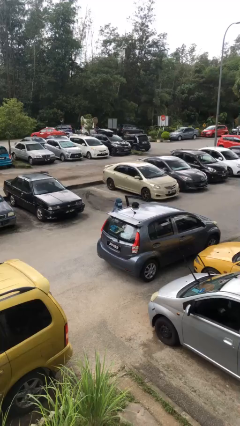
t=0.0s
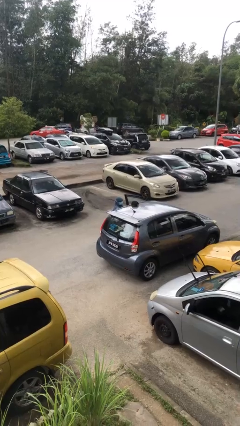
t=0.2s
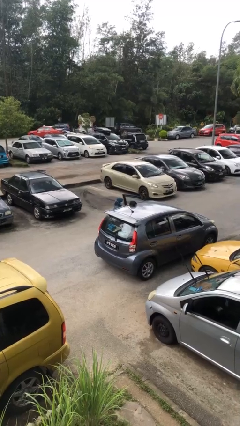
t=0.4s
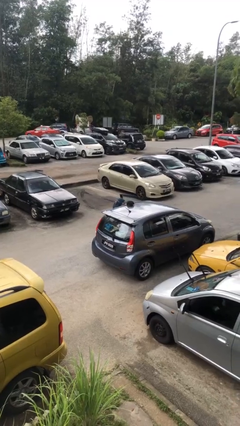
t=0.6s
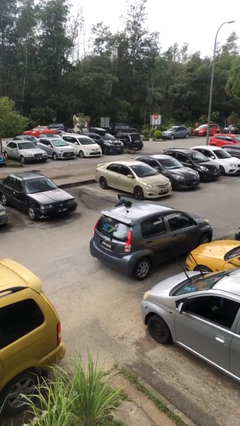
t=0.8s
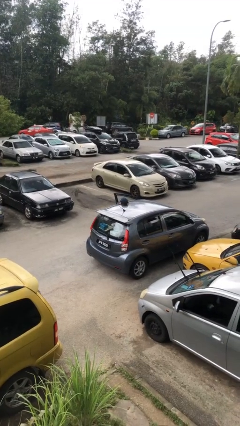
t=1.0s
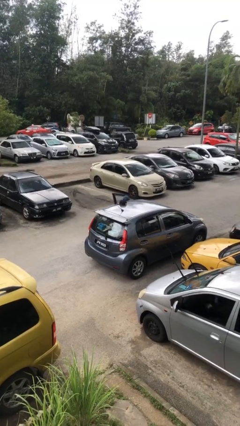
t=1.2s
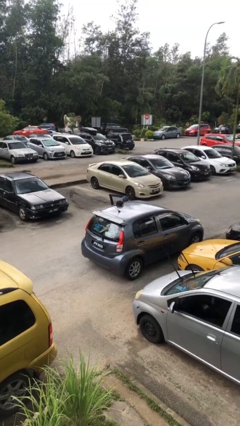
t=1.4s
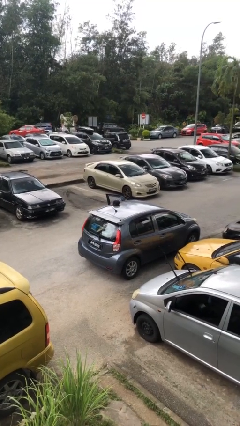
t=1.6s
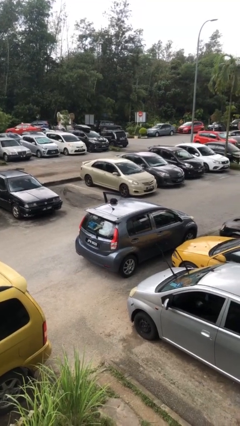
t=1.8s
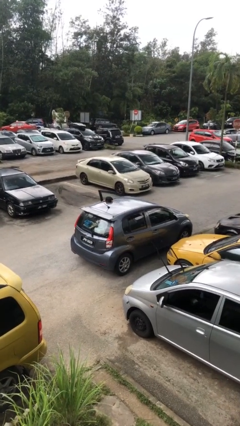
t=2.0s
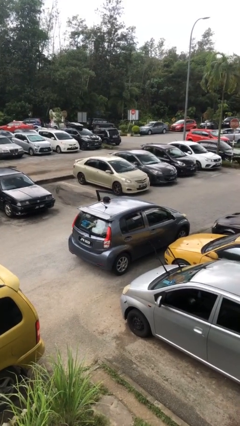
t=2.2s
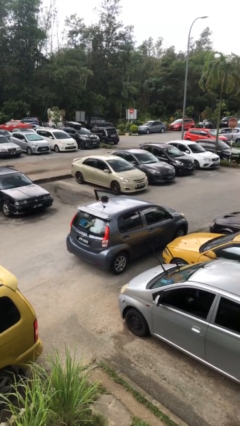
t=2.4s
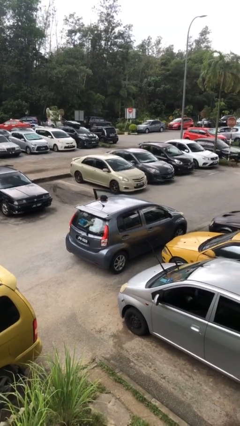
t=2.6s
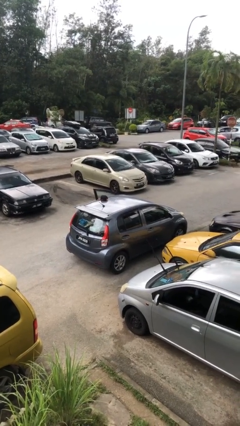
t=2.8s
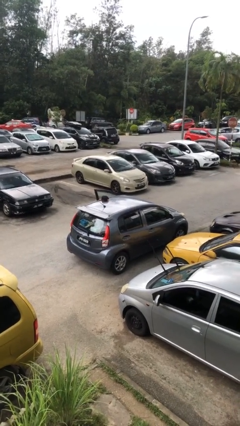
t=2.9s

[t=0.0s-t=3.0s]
person enters car

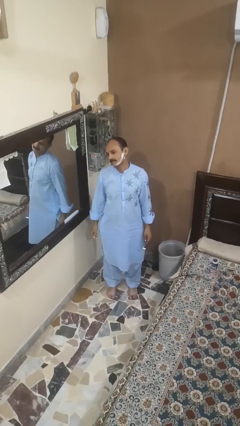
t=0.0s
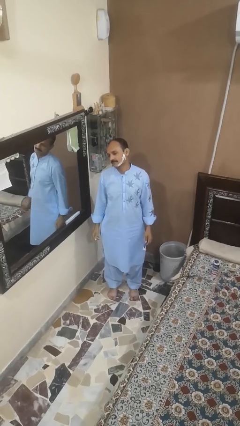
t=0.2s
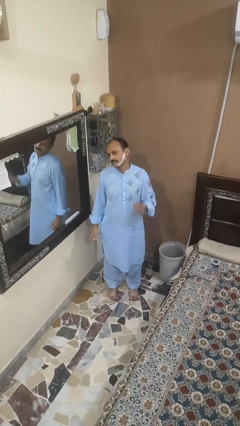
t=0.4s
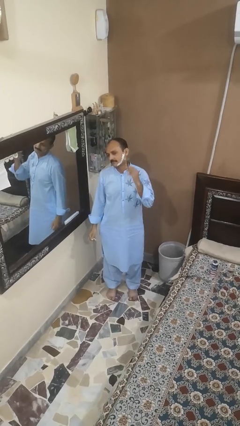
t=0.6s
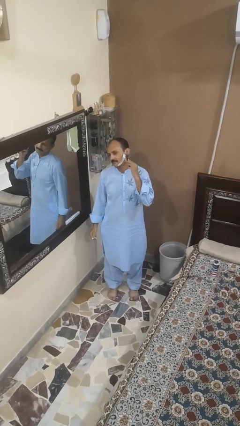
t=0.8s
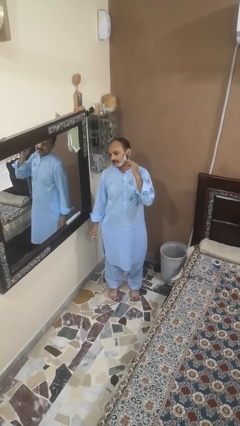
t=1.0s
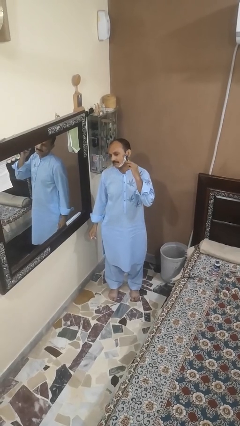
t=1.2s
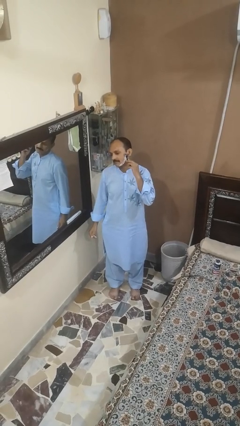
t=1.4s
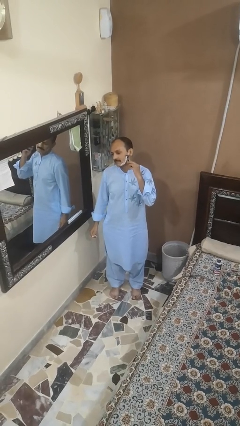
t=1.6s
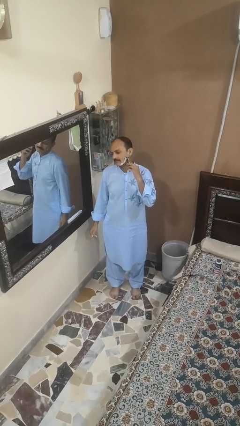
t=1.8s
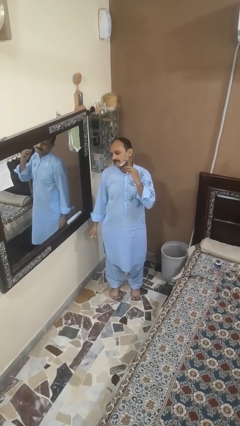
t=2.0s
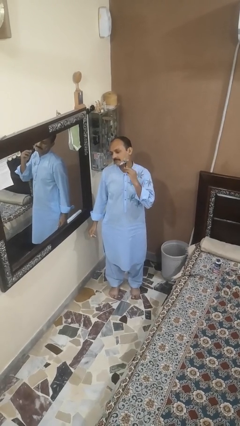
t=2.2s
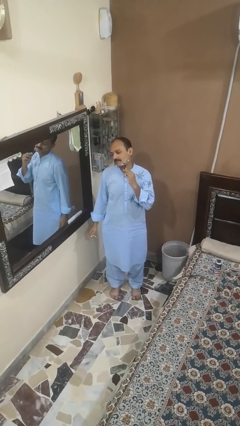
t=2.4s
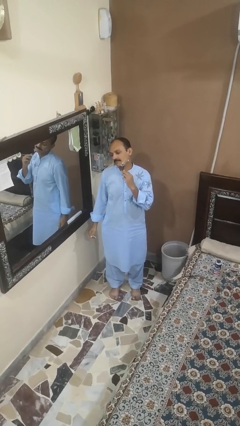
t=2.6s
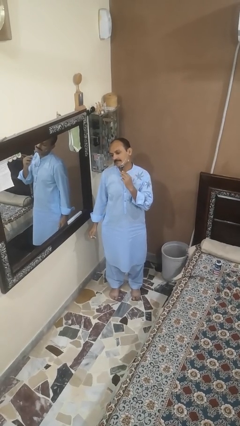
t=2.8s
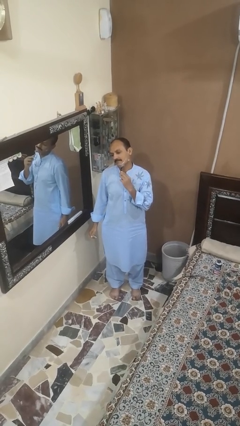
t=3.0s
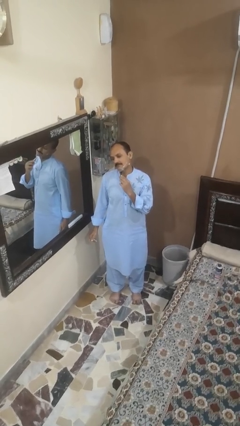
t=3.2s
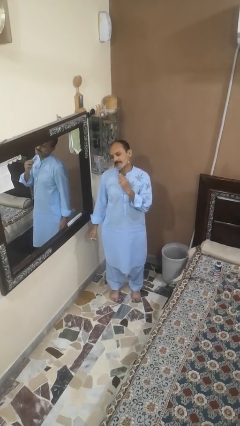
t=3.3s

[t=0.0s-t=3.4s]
person shaves face

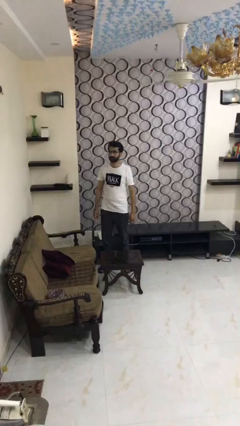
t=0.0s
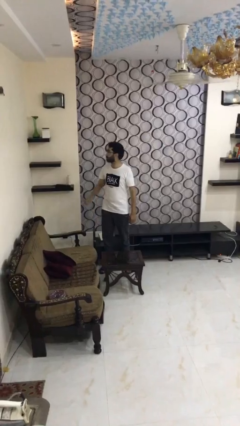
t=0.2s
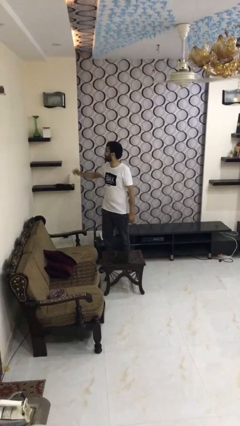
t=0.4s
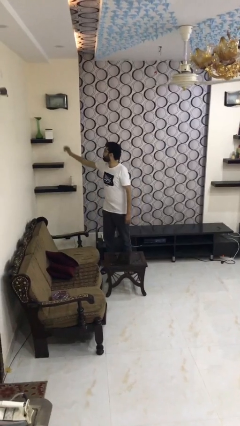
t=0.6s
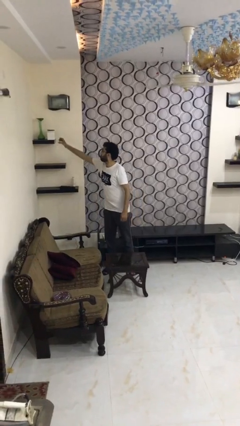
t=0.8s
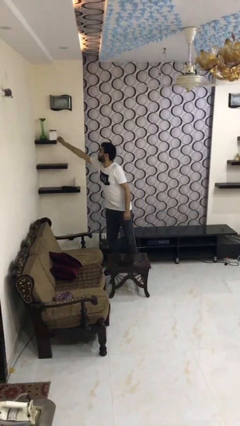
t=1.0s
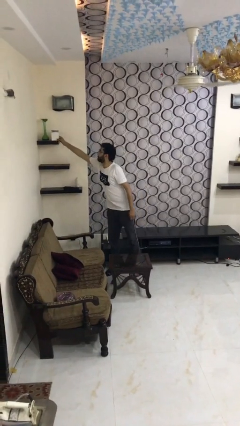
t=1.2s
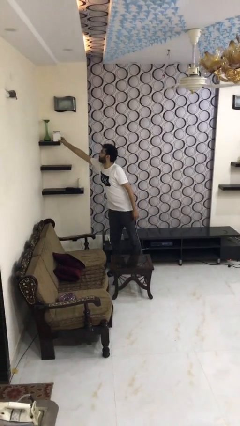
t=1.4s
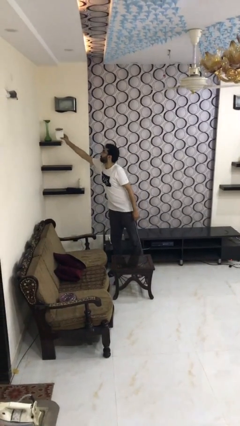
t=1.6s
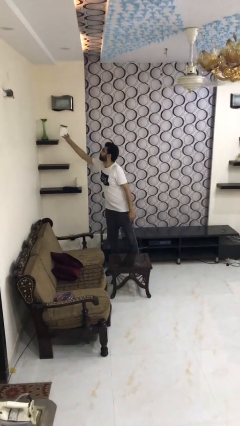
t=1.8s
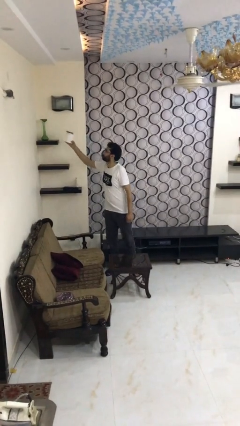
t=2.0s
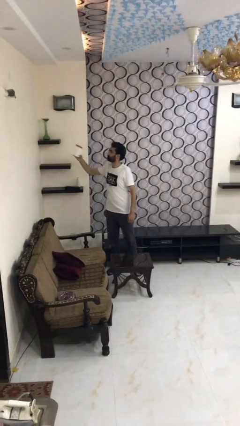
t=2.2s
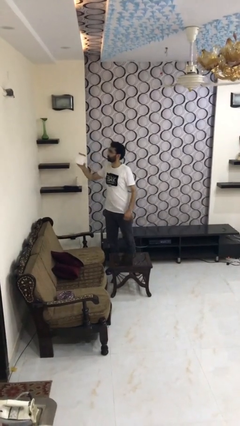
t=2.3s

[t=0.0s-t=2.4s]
person picks up object from shelf

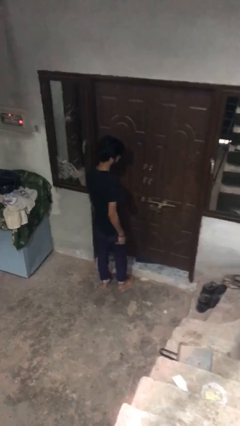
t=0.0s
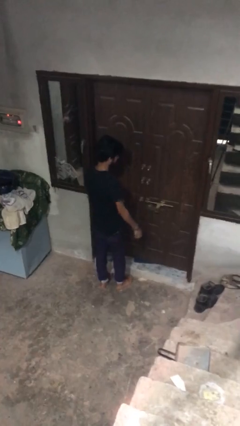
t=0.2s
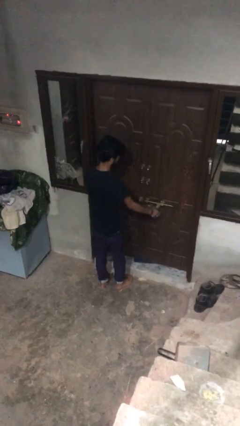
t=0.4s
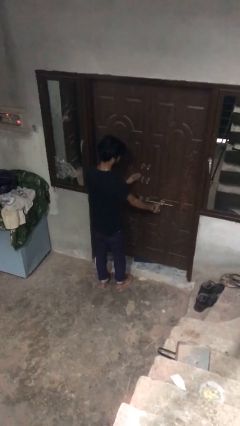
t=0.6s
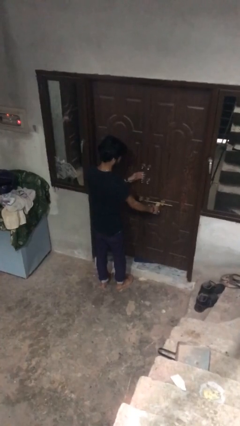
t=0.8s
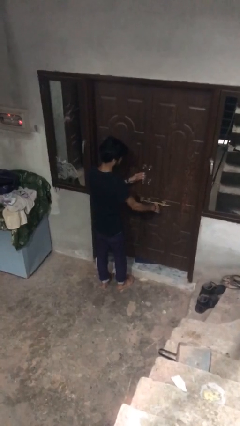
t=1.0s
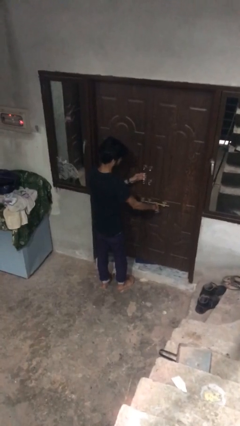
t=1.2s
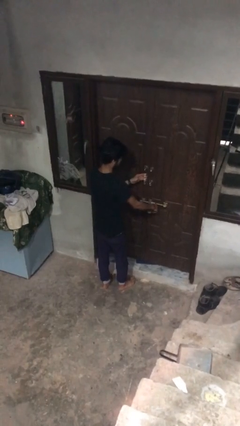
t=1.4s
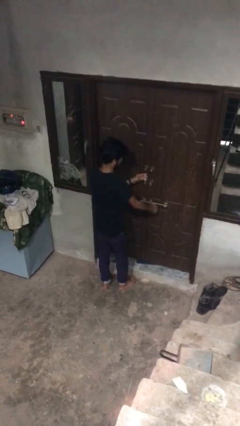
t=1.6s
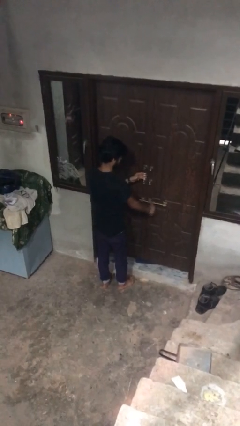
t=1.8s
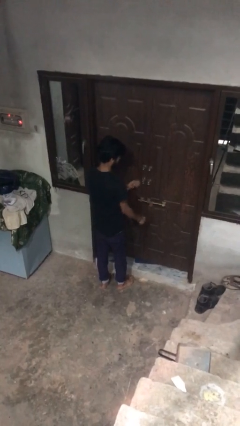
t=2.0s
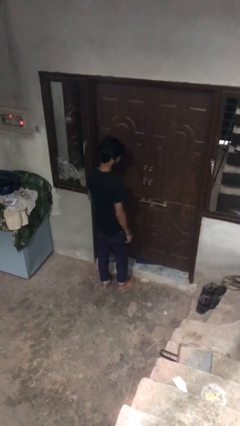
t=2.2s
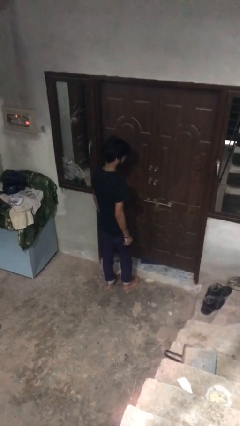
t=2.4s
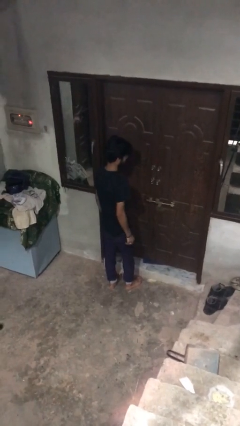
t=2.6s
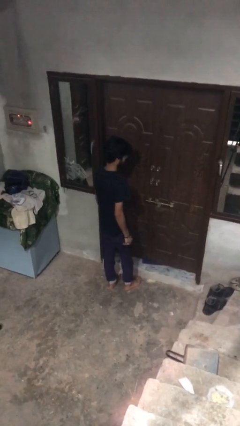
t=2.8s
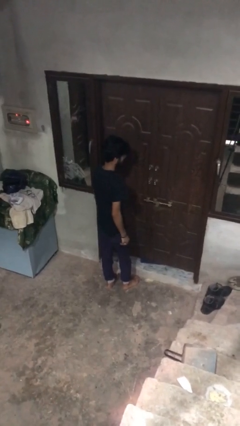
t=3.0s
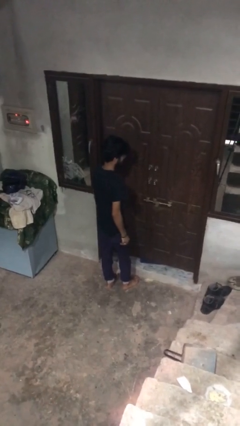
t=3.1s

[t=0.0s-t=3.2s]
person locks door with keys

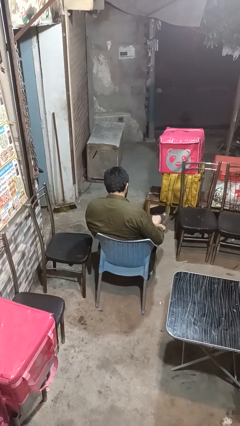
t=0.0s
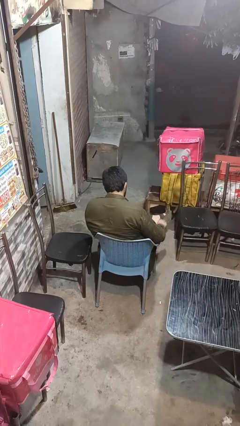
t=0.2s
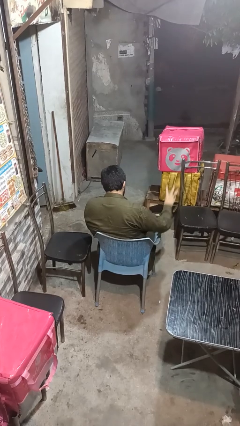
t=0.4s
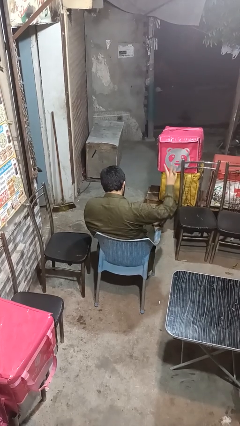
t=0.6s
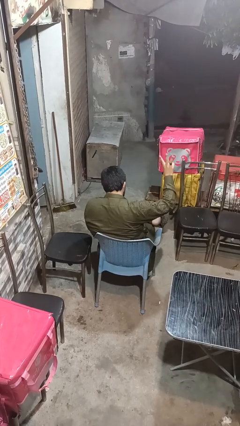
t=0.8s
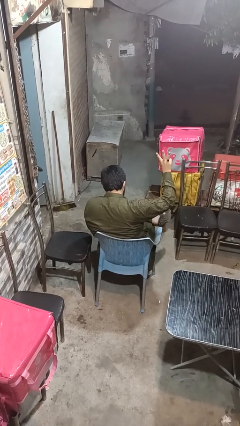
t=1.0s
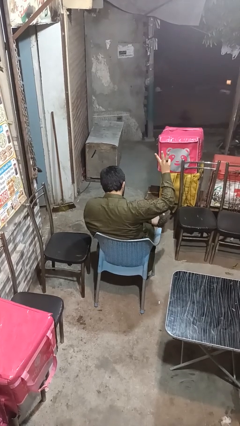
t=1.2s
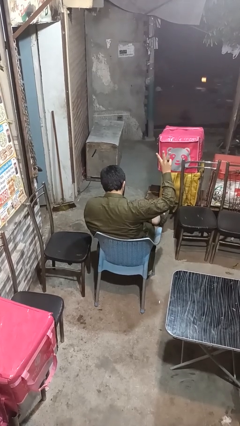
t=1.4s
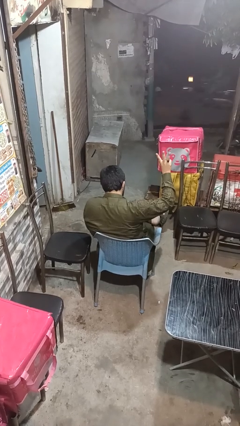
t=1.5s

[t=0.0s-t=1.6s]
person gestures number three

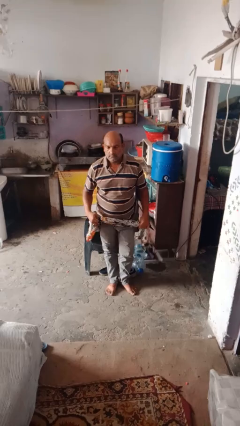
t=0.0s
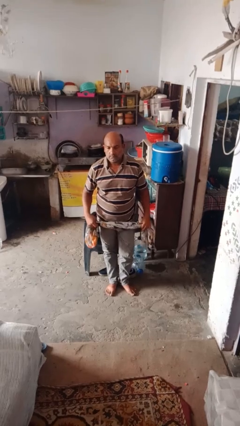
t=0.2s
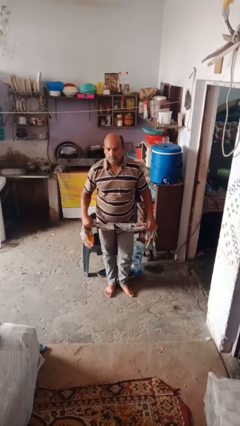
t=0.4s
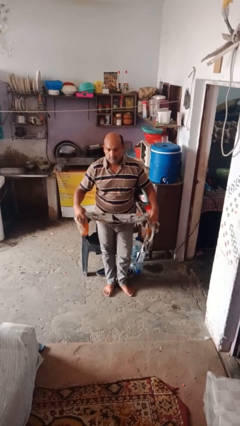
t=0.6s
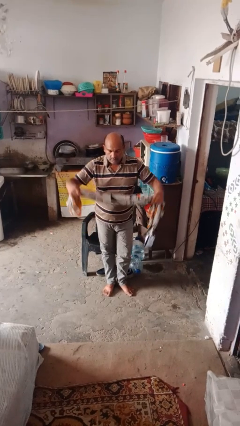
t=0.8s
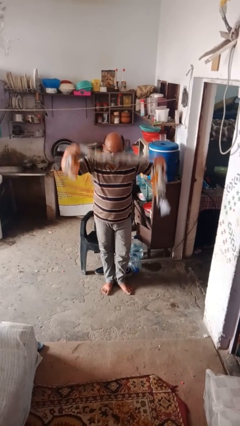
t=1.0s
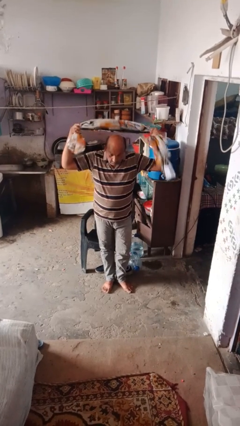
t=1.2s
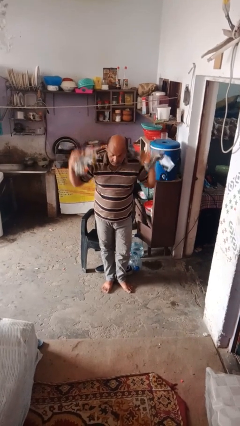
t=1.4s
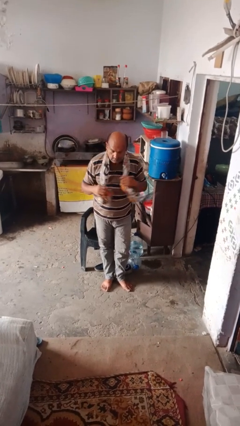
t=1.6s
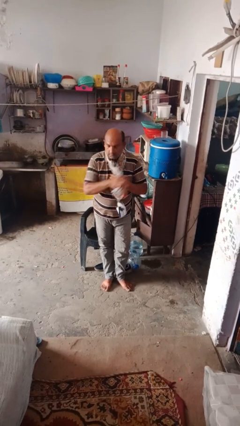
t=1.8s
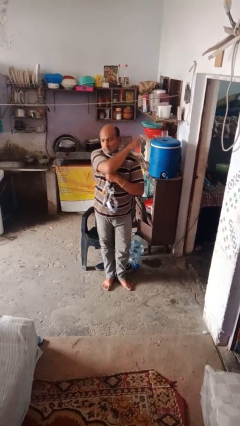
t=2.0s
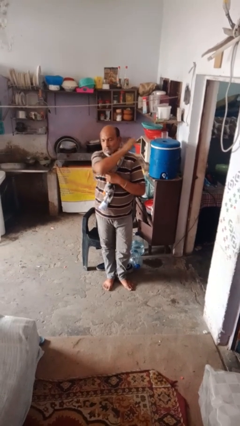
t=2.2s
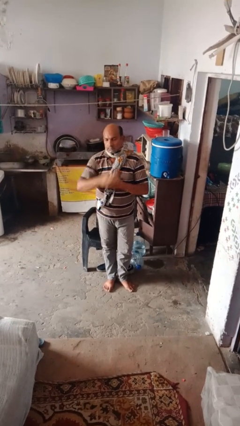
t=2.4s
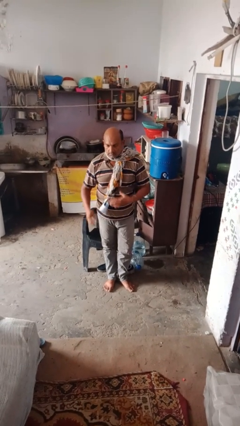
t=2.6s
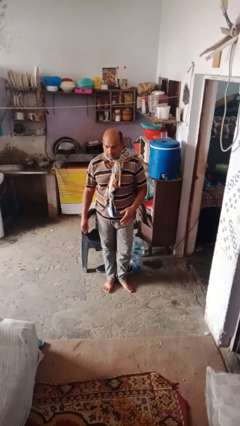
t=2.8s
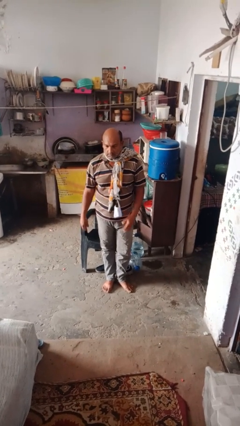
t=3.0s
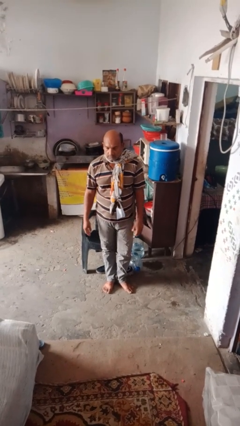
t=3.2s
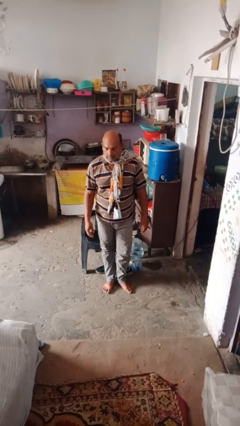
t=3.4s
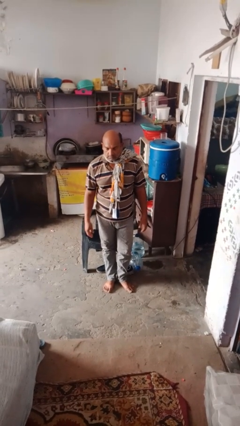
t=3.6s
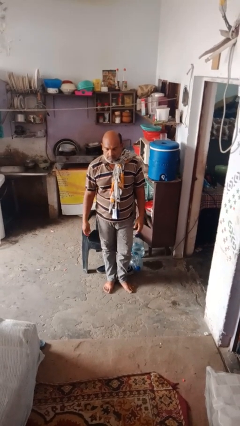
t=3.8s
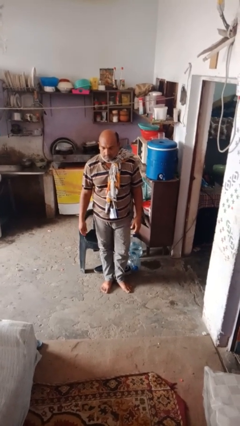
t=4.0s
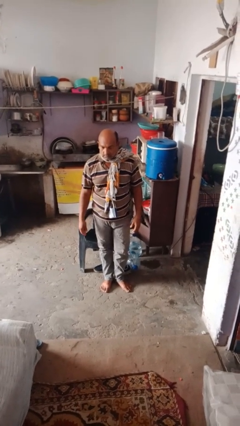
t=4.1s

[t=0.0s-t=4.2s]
person puts on scarf
